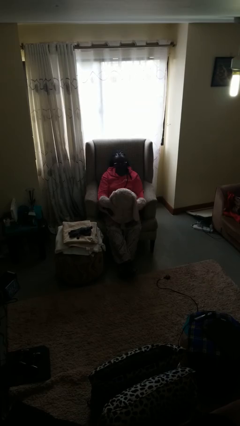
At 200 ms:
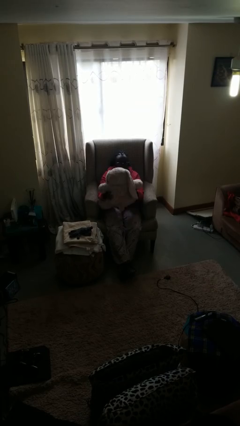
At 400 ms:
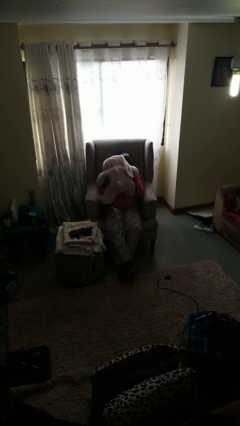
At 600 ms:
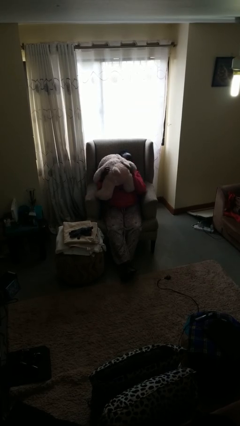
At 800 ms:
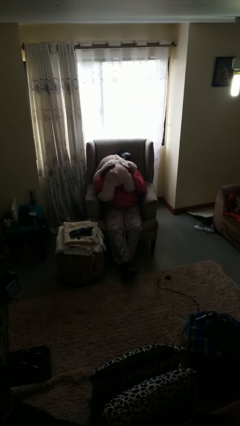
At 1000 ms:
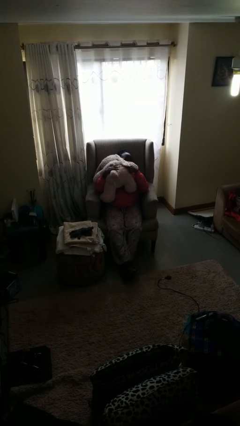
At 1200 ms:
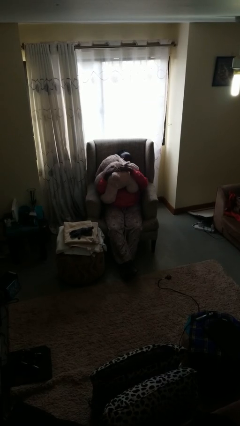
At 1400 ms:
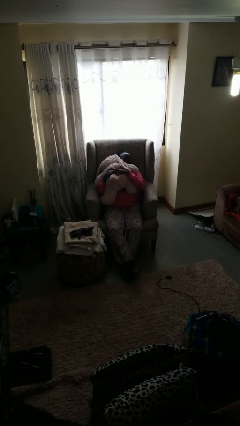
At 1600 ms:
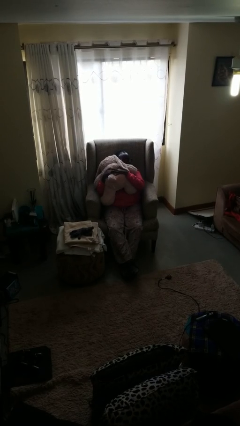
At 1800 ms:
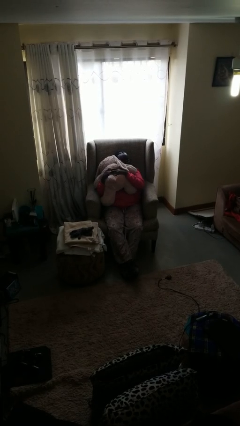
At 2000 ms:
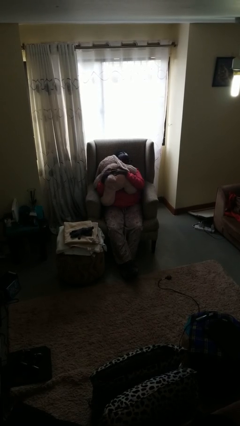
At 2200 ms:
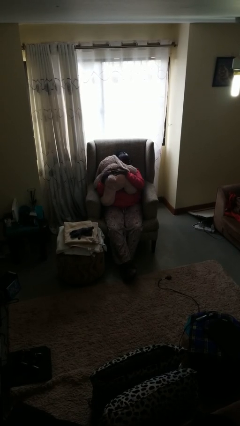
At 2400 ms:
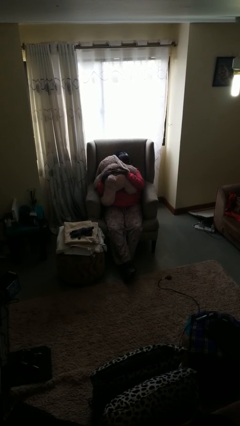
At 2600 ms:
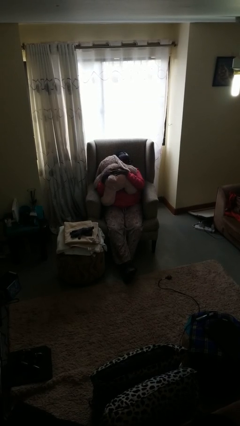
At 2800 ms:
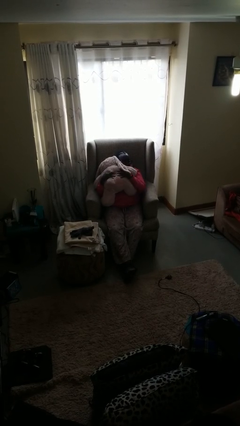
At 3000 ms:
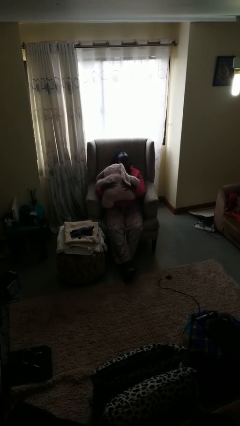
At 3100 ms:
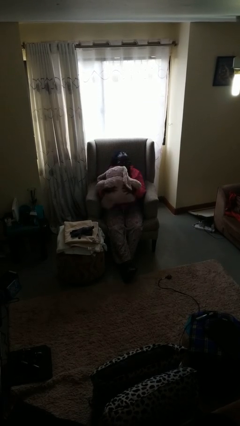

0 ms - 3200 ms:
person hugs stuffed animal

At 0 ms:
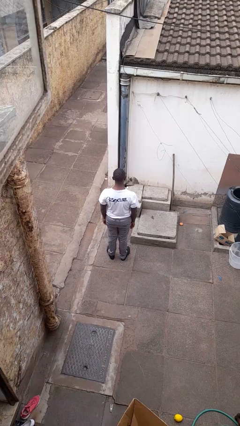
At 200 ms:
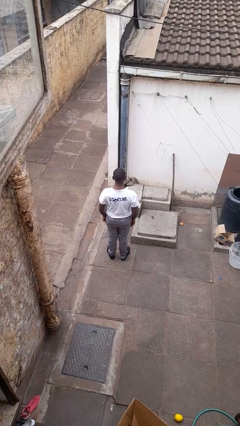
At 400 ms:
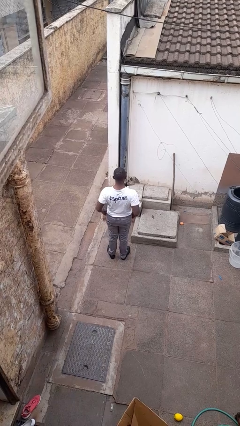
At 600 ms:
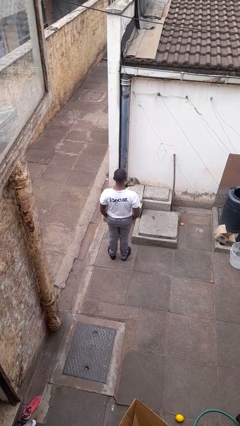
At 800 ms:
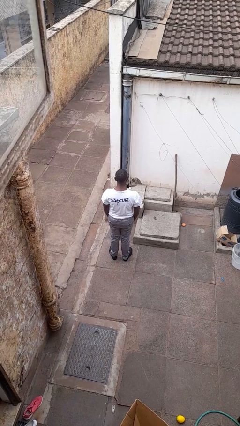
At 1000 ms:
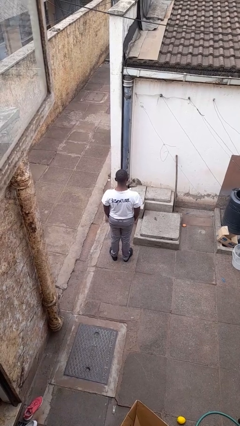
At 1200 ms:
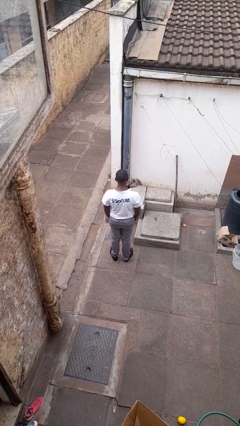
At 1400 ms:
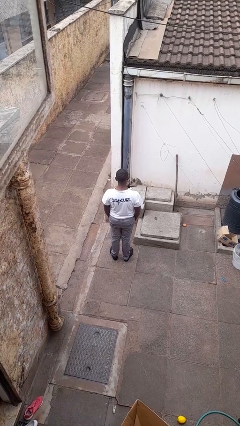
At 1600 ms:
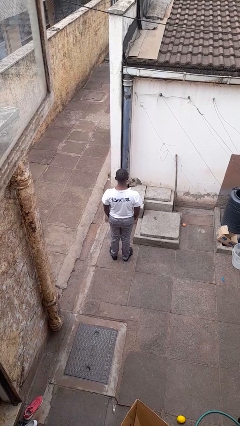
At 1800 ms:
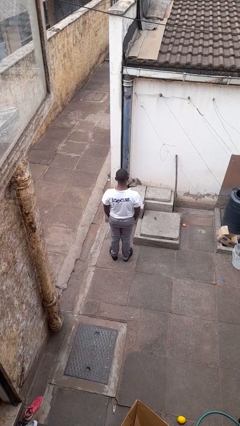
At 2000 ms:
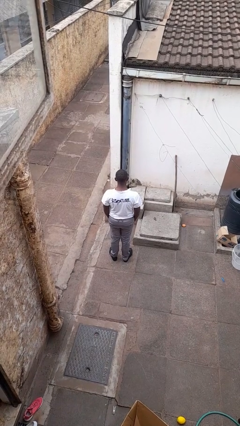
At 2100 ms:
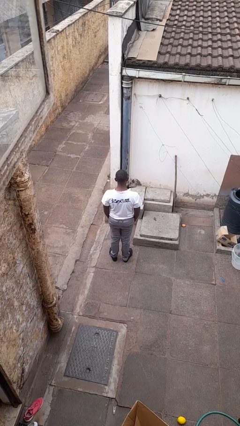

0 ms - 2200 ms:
person puts hands in back pockets

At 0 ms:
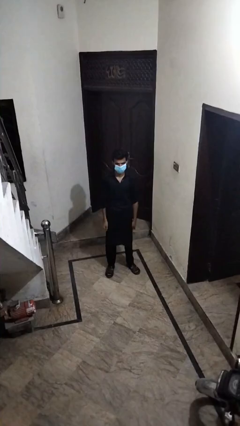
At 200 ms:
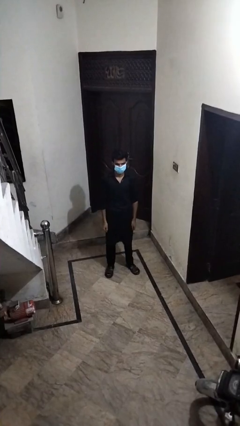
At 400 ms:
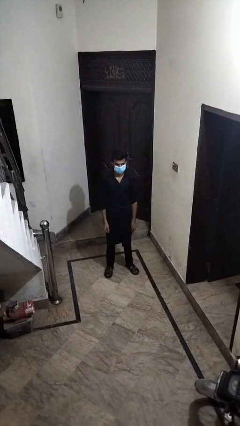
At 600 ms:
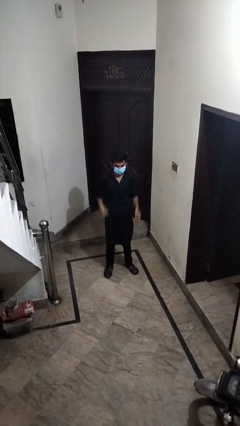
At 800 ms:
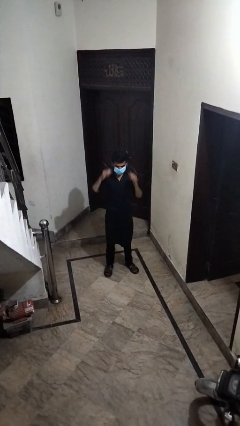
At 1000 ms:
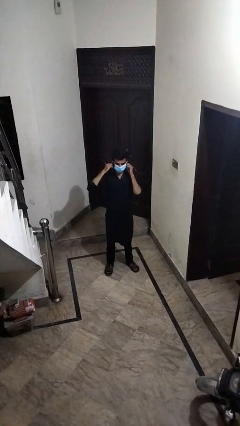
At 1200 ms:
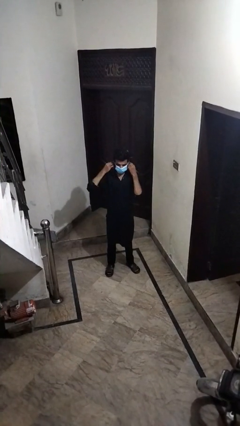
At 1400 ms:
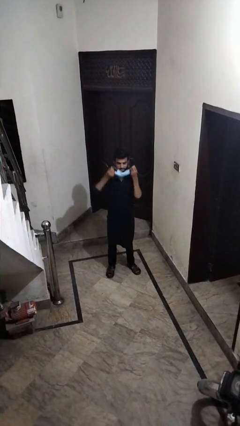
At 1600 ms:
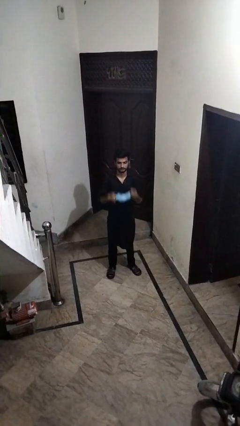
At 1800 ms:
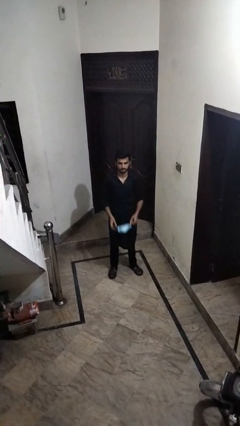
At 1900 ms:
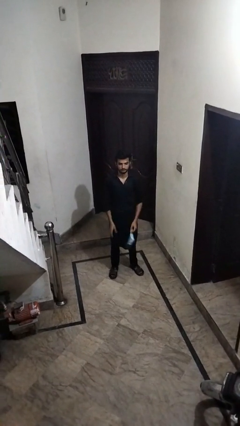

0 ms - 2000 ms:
person takes off facemask

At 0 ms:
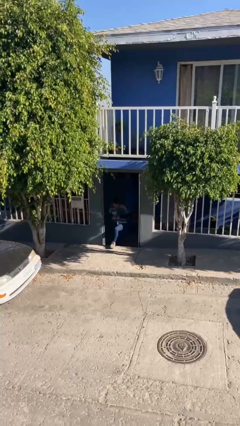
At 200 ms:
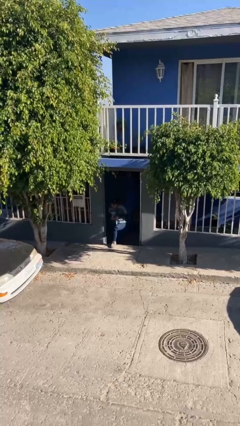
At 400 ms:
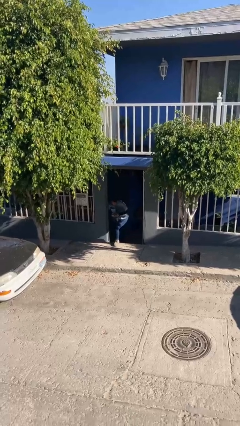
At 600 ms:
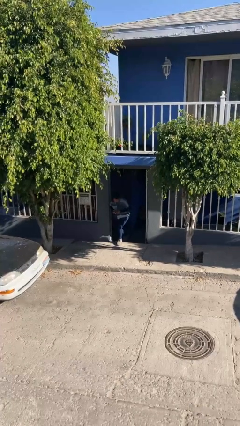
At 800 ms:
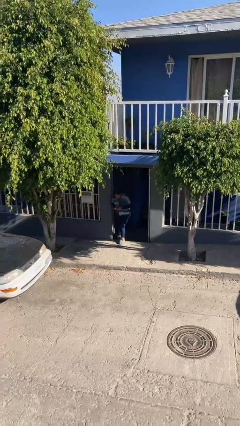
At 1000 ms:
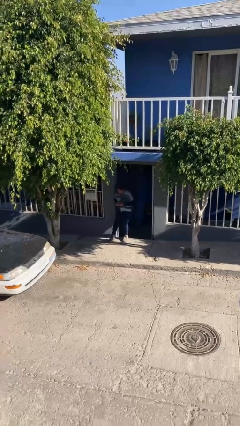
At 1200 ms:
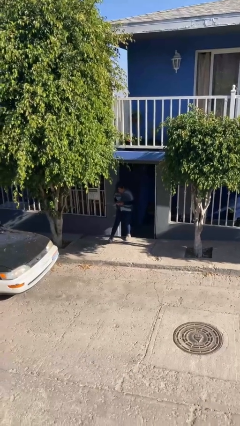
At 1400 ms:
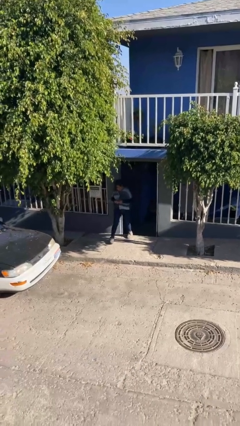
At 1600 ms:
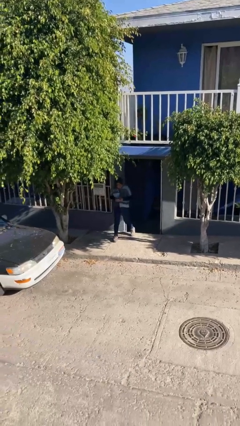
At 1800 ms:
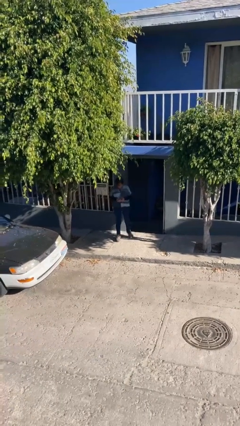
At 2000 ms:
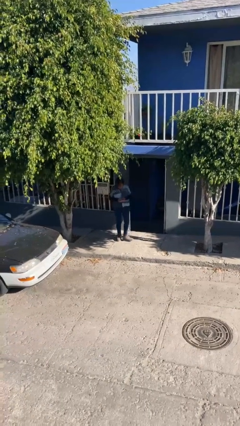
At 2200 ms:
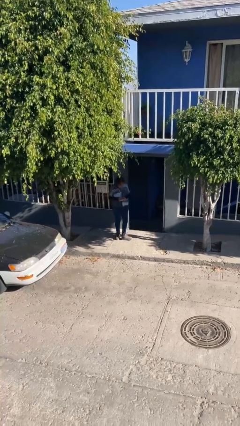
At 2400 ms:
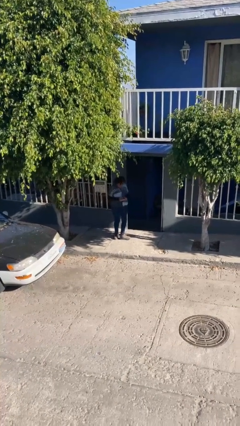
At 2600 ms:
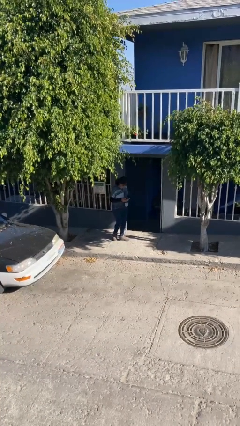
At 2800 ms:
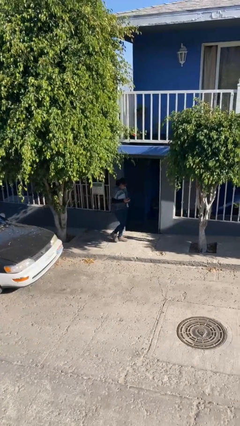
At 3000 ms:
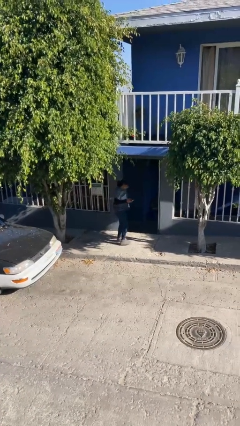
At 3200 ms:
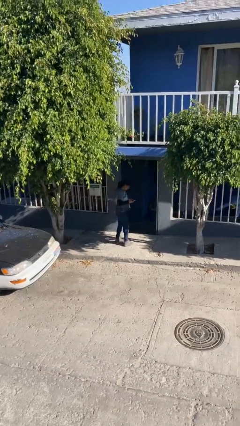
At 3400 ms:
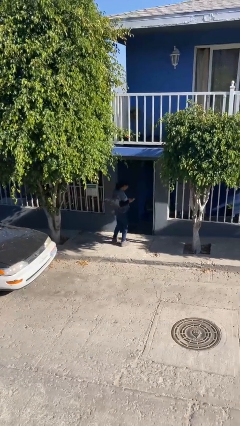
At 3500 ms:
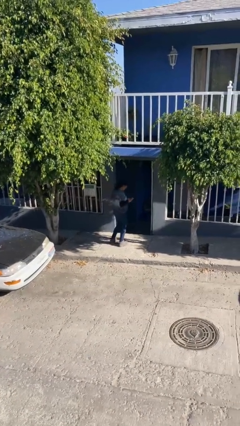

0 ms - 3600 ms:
person enters scene through structure

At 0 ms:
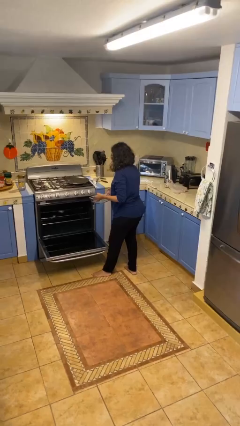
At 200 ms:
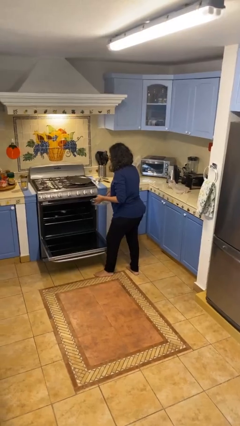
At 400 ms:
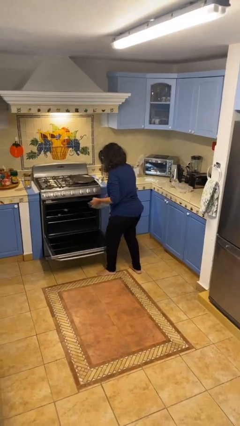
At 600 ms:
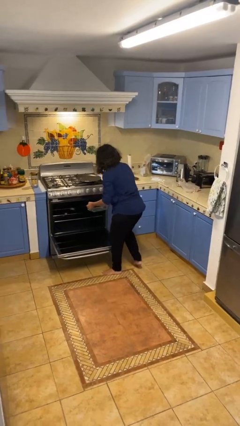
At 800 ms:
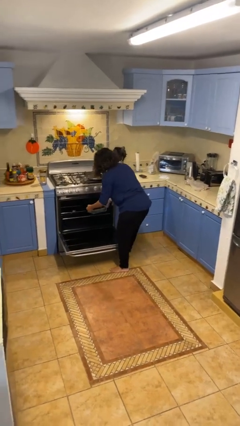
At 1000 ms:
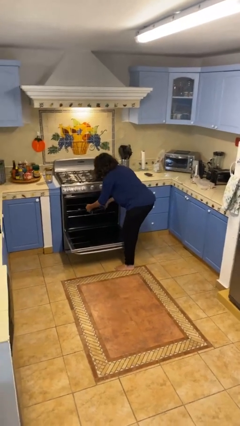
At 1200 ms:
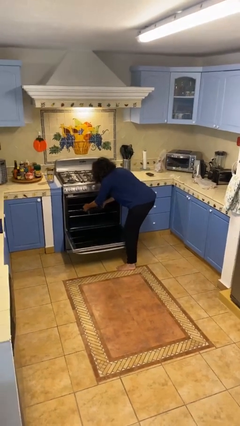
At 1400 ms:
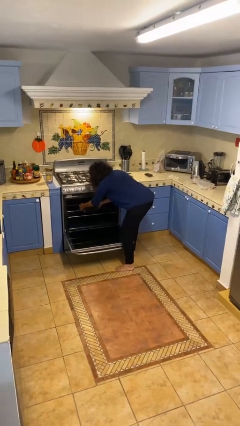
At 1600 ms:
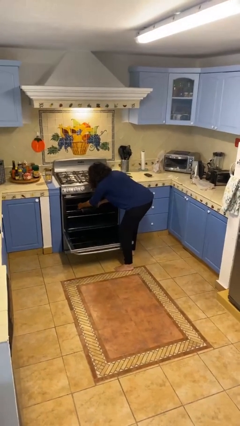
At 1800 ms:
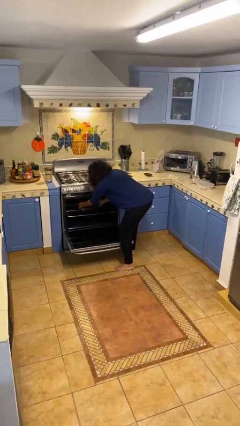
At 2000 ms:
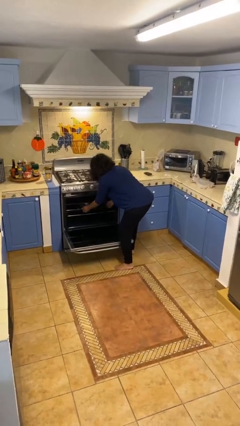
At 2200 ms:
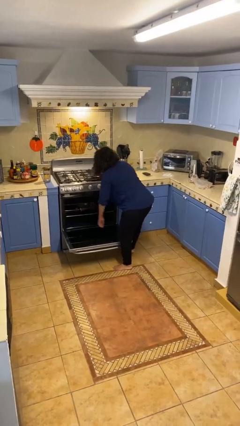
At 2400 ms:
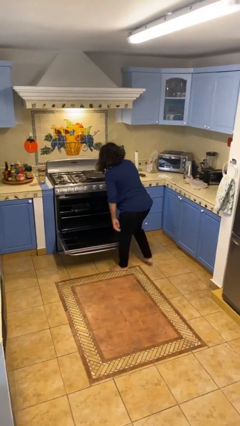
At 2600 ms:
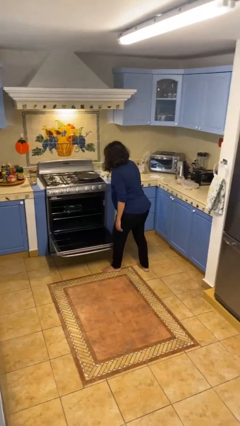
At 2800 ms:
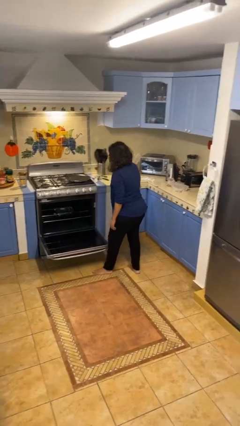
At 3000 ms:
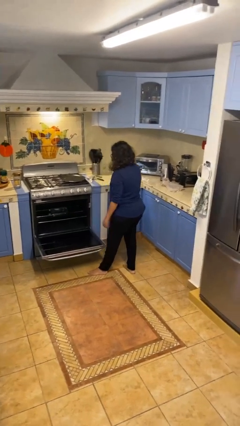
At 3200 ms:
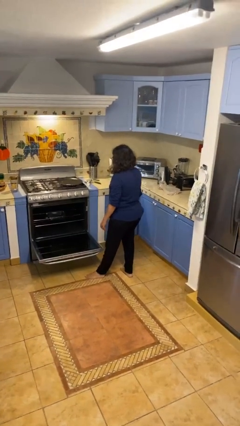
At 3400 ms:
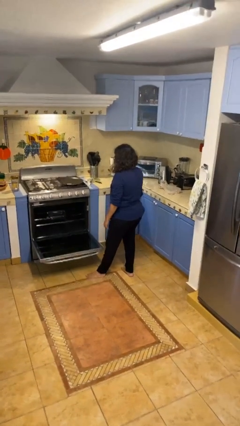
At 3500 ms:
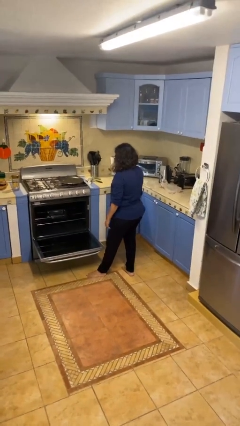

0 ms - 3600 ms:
person puts object into oven

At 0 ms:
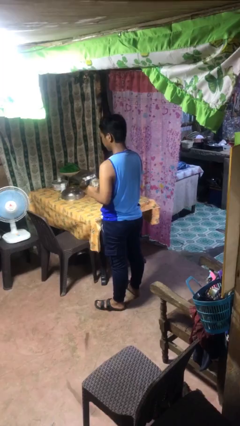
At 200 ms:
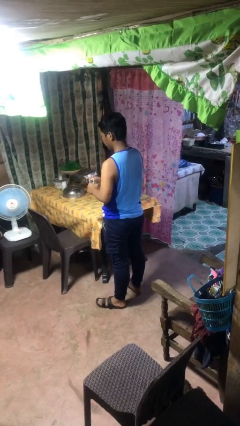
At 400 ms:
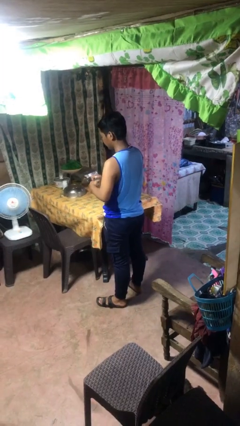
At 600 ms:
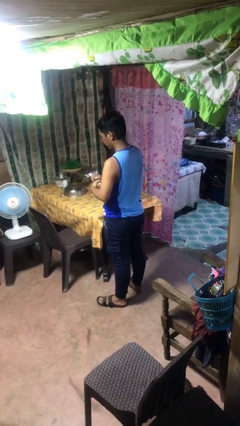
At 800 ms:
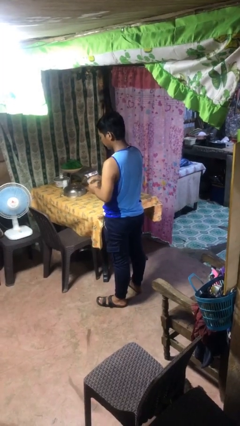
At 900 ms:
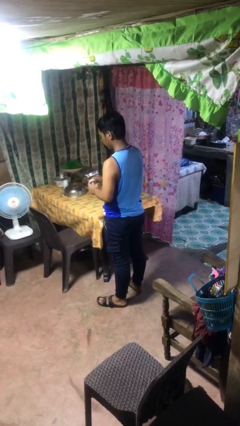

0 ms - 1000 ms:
person closes jar

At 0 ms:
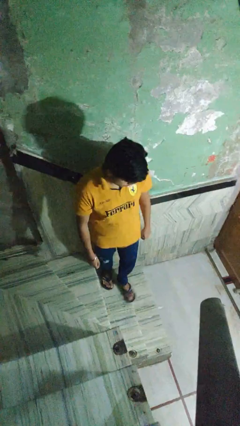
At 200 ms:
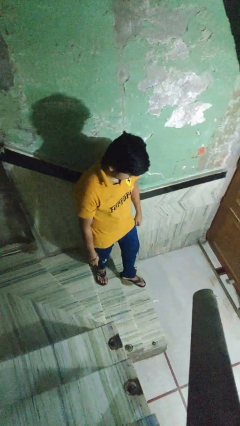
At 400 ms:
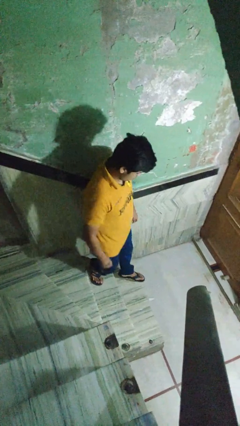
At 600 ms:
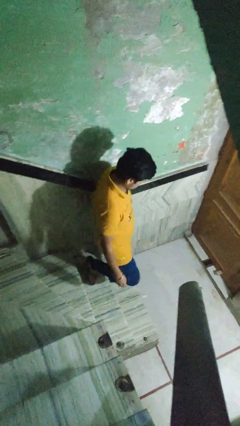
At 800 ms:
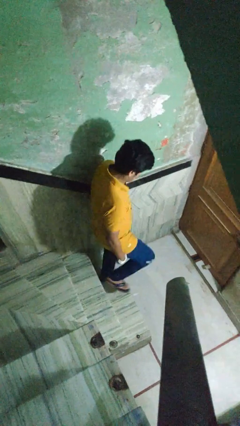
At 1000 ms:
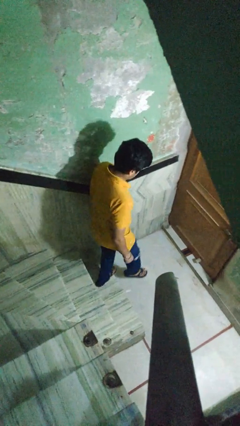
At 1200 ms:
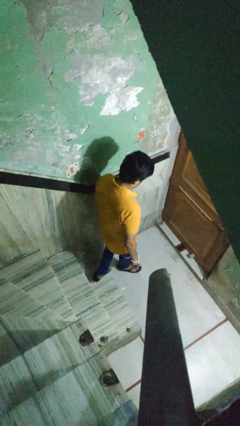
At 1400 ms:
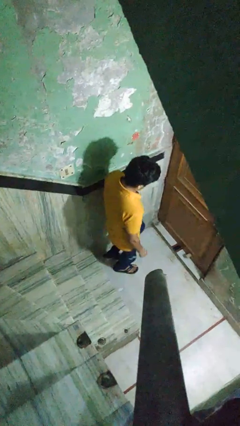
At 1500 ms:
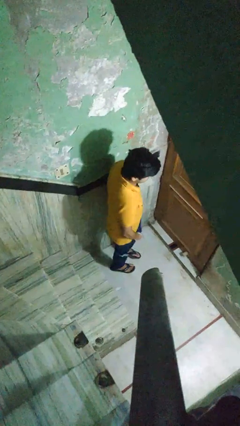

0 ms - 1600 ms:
person climbs down stairs
